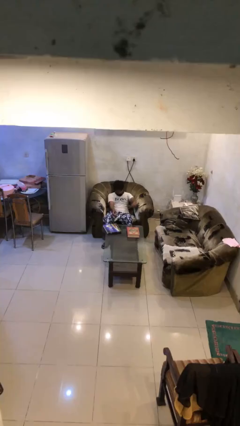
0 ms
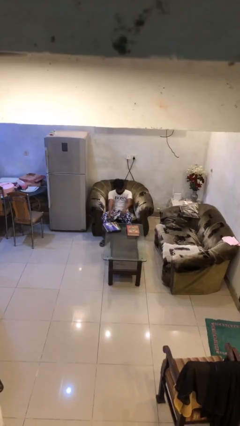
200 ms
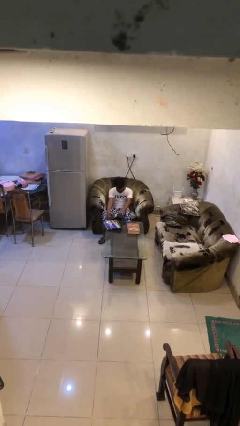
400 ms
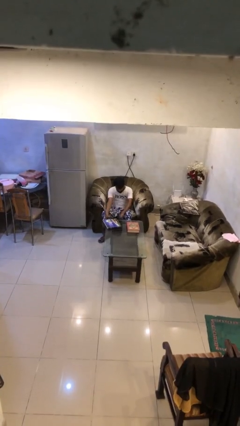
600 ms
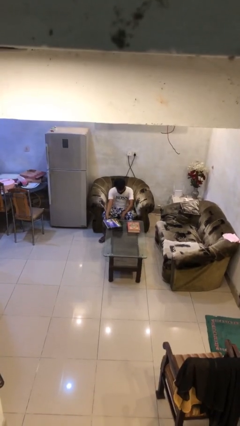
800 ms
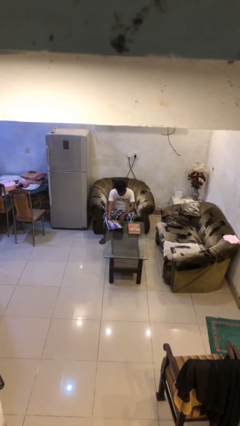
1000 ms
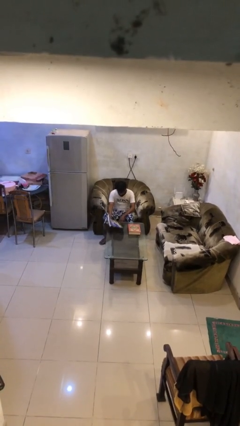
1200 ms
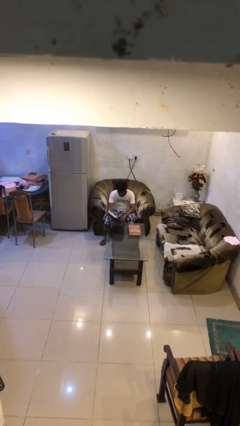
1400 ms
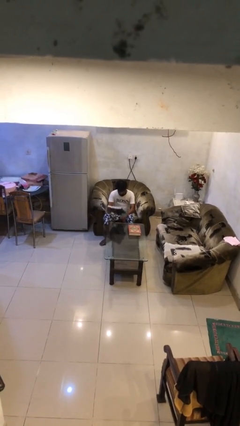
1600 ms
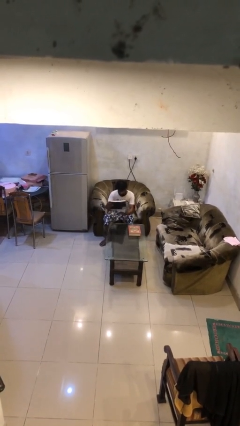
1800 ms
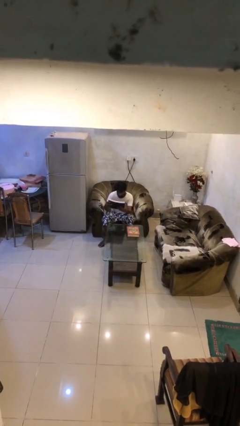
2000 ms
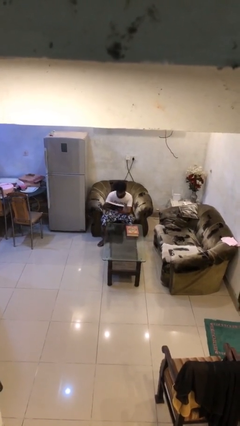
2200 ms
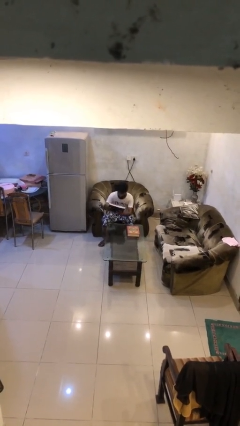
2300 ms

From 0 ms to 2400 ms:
person picks up object from table

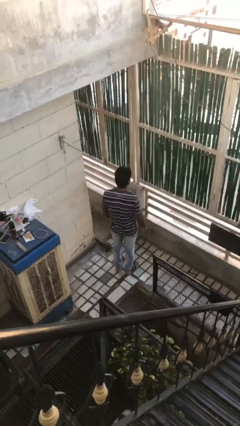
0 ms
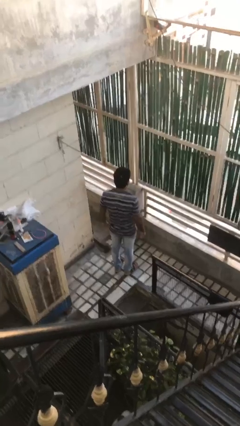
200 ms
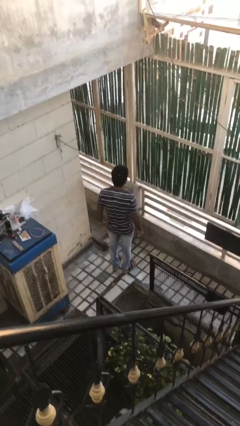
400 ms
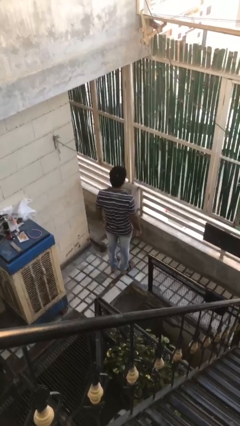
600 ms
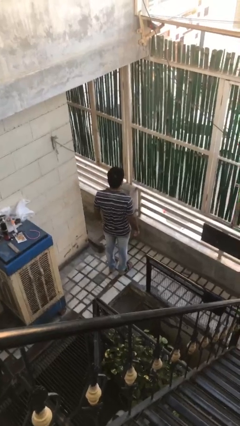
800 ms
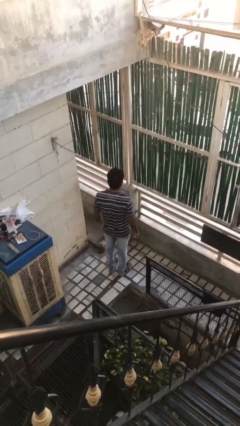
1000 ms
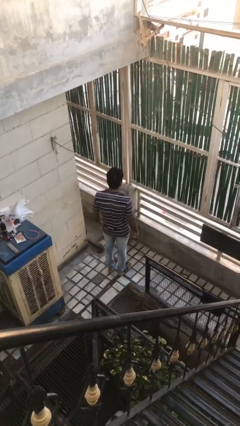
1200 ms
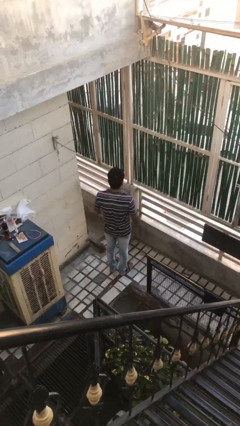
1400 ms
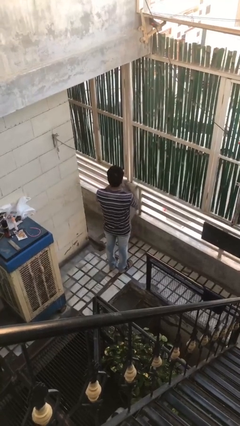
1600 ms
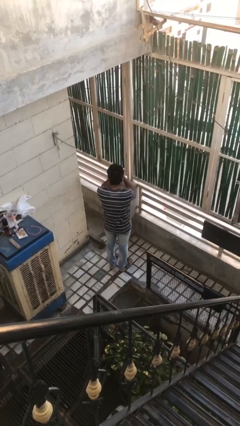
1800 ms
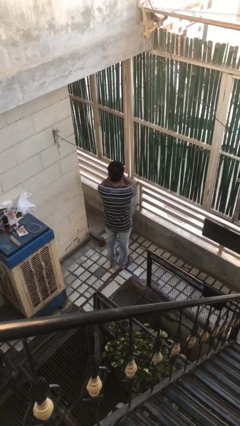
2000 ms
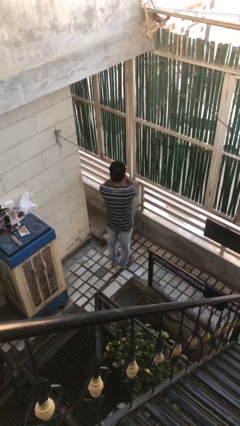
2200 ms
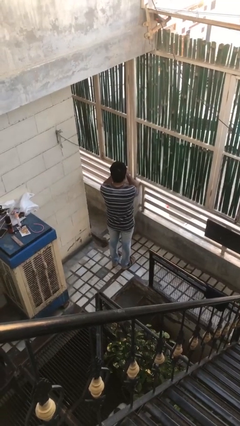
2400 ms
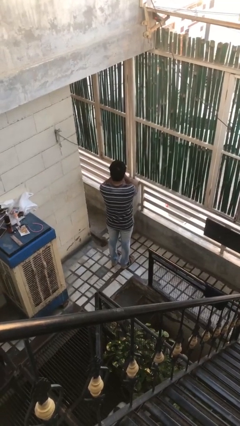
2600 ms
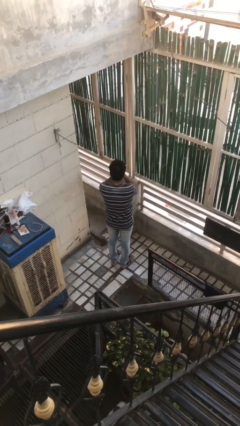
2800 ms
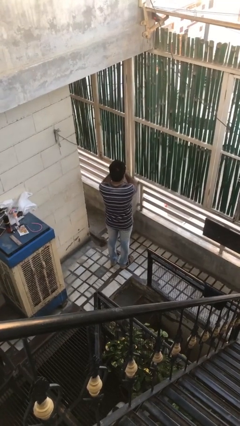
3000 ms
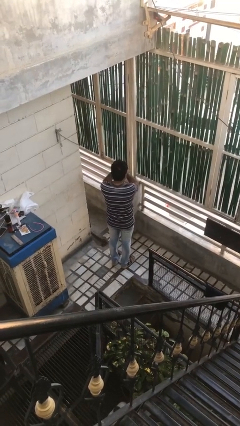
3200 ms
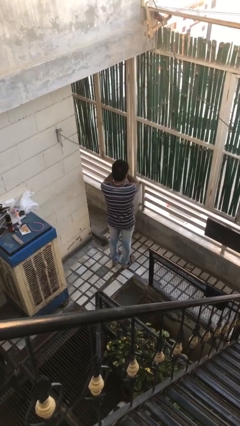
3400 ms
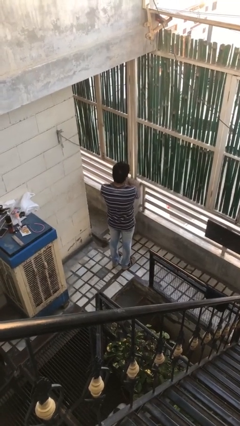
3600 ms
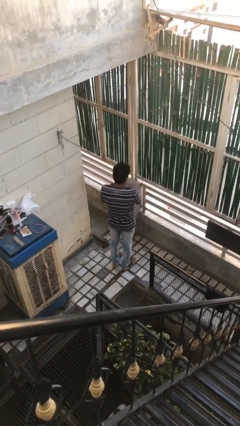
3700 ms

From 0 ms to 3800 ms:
person snaps fingers

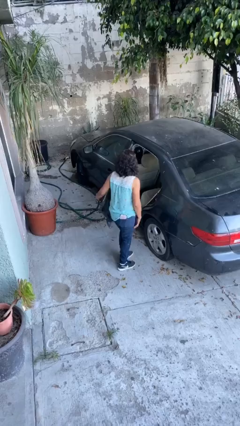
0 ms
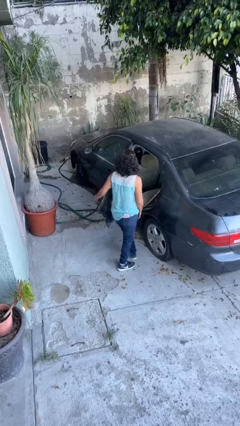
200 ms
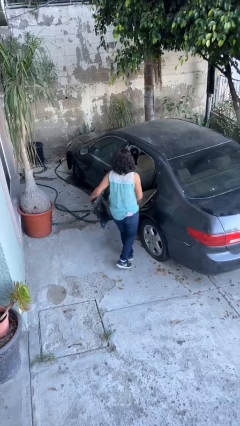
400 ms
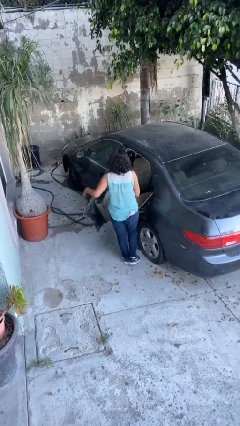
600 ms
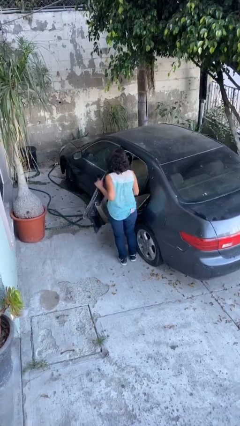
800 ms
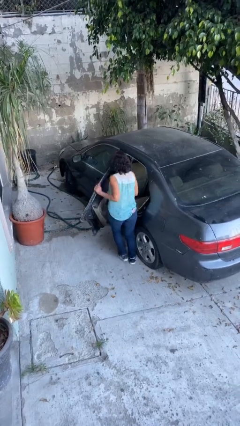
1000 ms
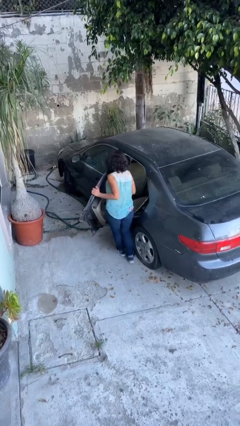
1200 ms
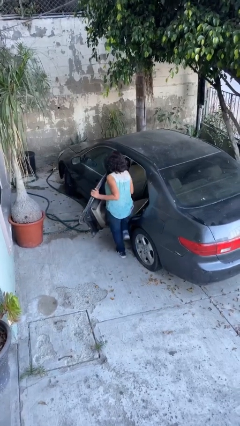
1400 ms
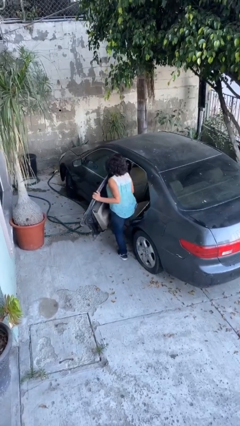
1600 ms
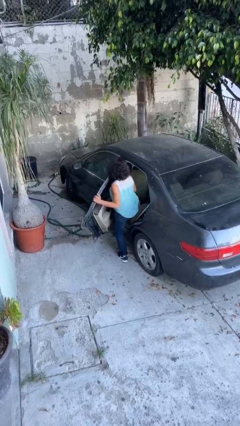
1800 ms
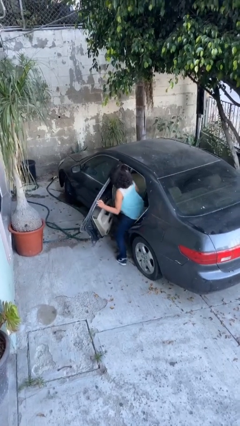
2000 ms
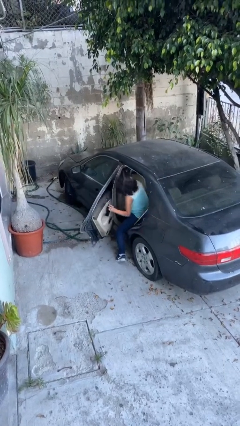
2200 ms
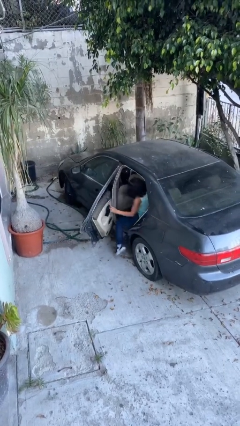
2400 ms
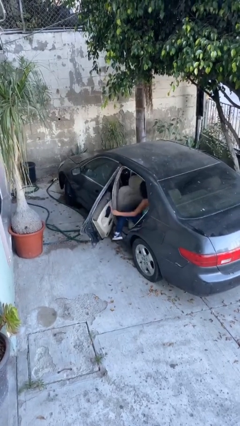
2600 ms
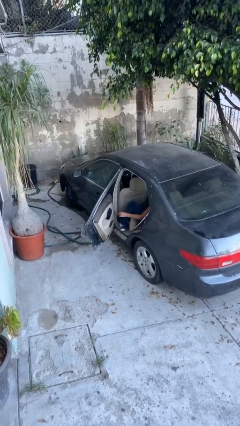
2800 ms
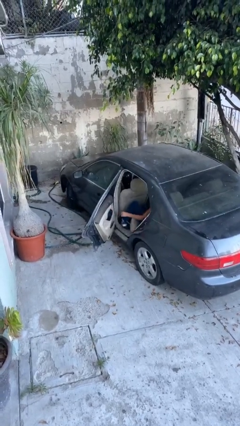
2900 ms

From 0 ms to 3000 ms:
person enters car

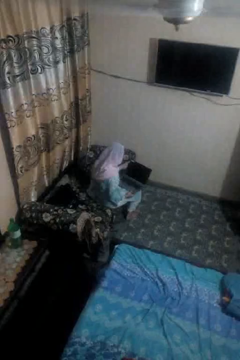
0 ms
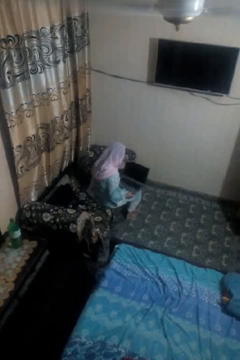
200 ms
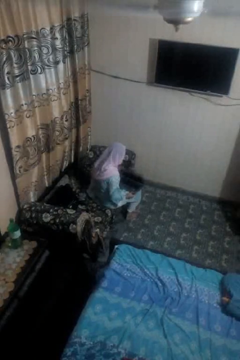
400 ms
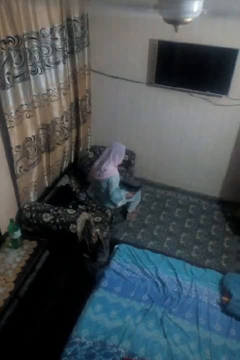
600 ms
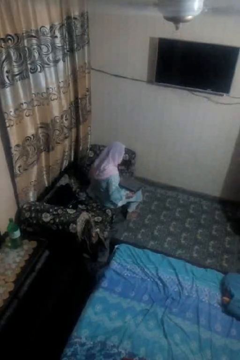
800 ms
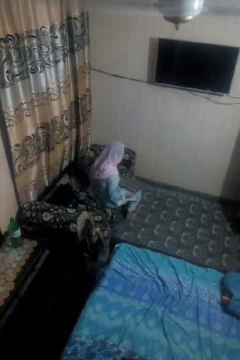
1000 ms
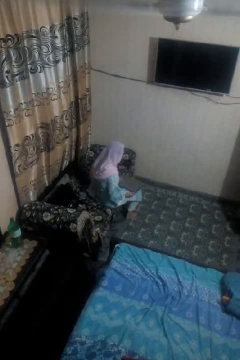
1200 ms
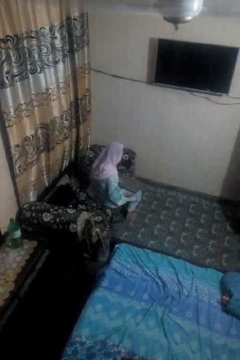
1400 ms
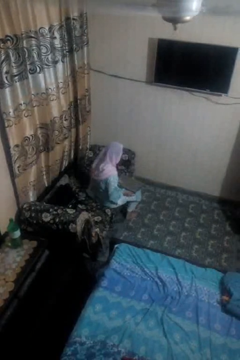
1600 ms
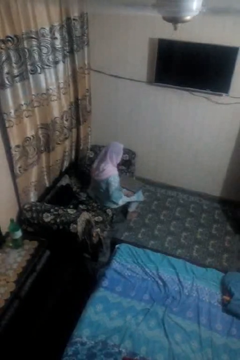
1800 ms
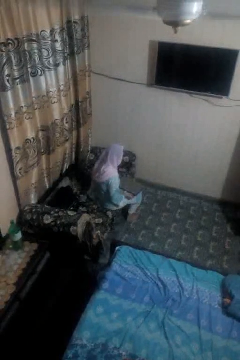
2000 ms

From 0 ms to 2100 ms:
person closes laptop

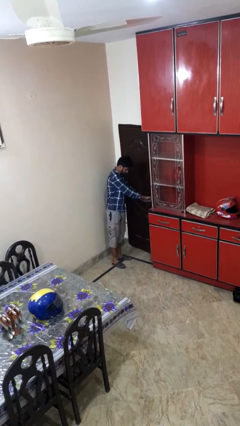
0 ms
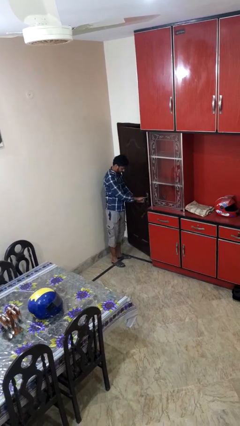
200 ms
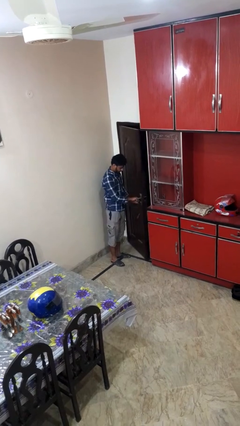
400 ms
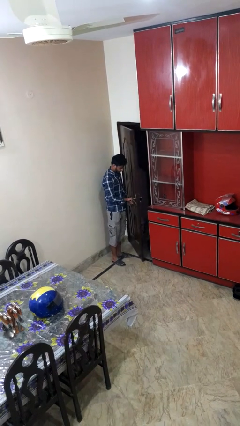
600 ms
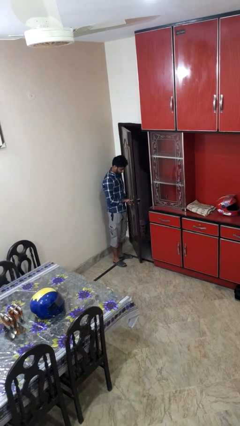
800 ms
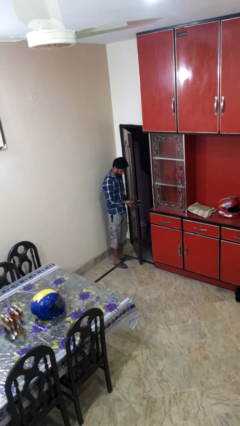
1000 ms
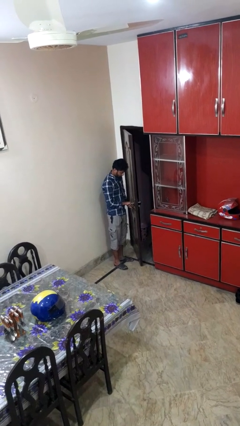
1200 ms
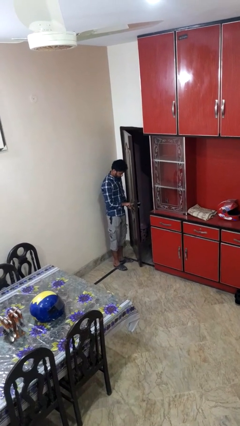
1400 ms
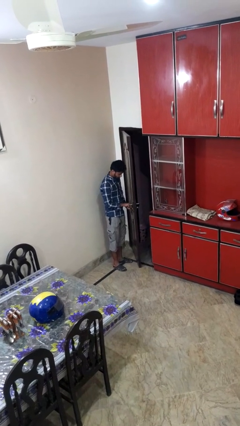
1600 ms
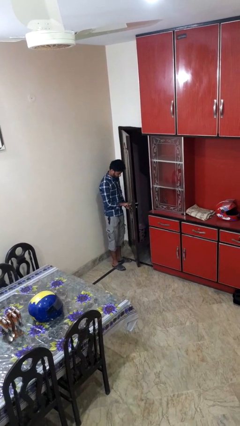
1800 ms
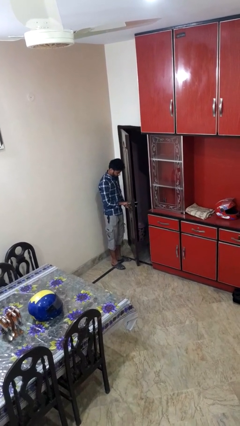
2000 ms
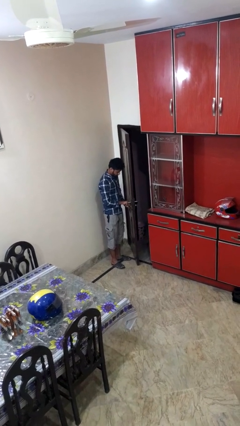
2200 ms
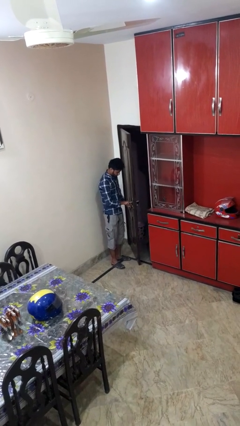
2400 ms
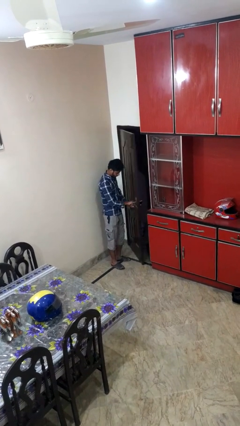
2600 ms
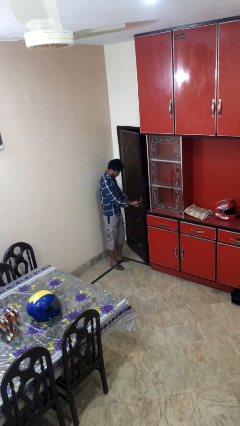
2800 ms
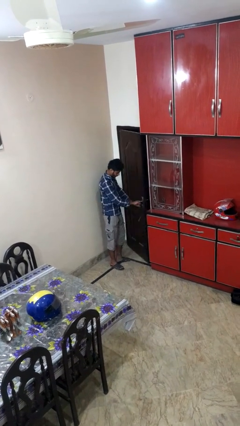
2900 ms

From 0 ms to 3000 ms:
person opens facility door

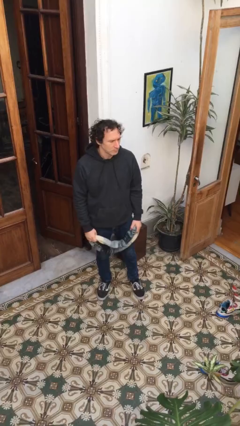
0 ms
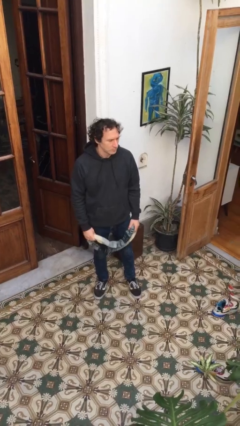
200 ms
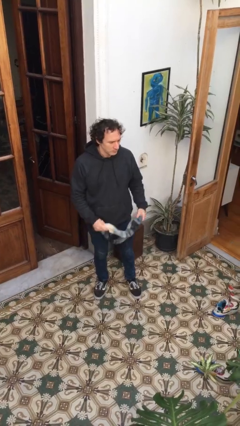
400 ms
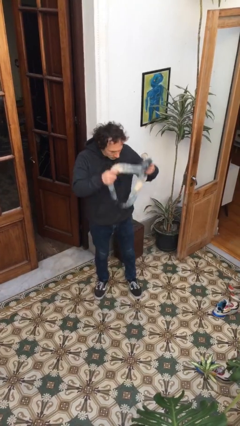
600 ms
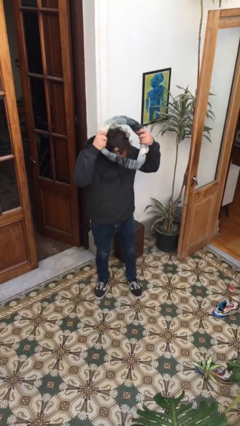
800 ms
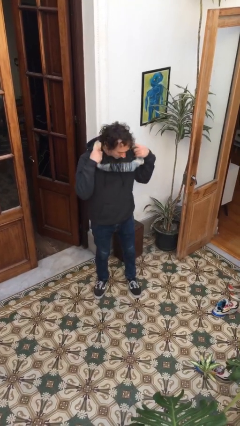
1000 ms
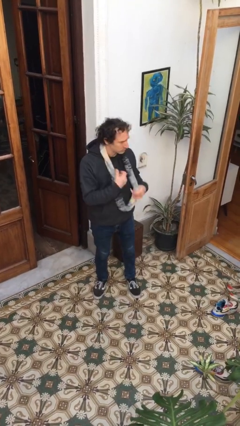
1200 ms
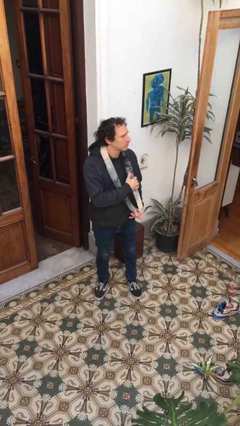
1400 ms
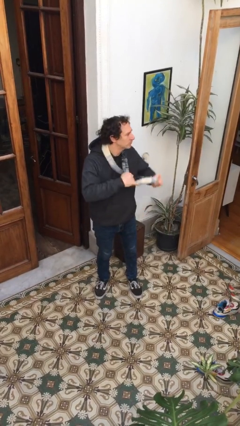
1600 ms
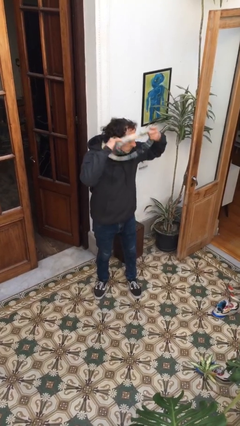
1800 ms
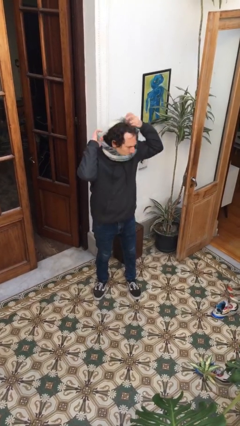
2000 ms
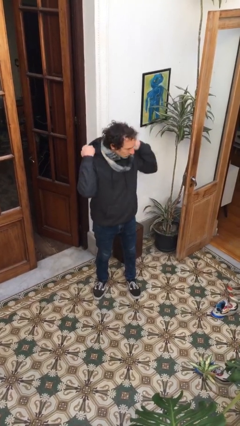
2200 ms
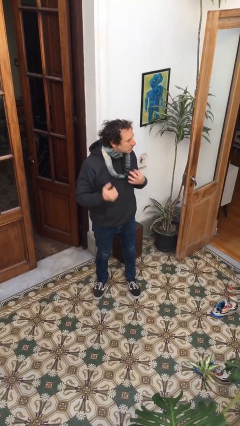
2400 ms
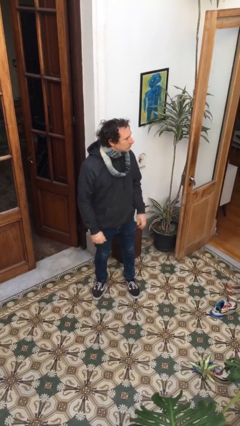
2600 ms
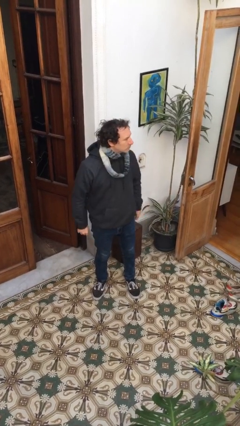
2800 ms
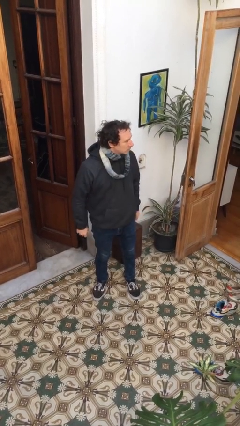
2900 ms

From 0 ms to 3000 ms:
person puts on scarf

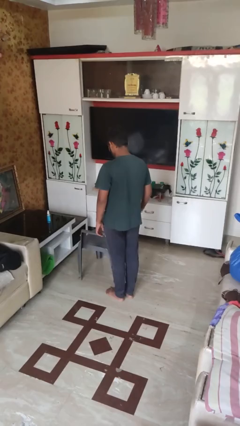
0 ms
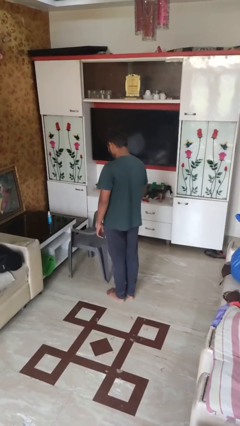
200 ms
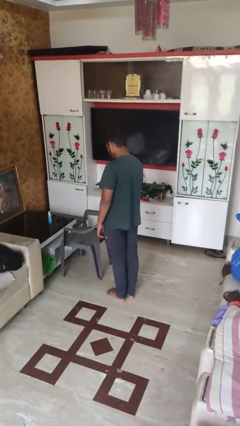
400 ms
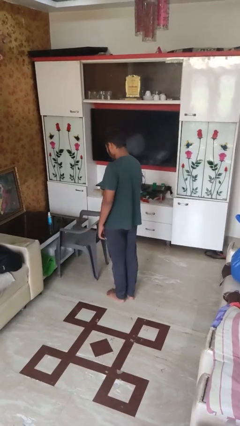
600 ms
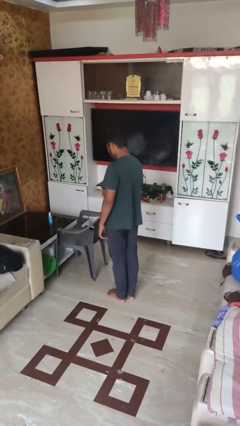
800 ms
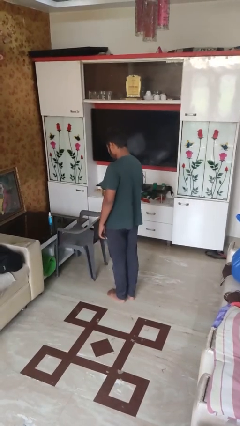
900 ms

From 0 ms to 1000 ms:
person pushes in chair
